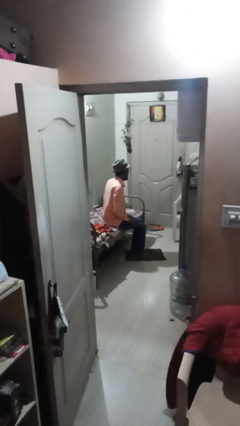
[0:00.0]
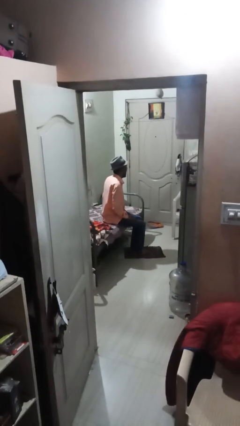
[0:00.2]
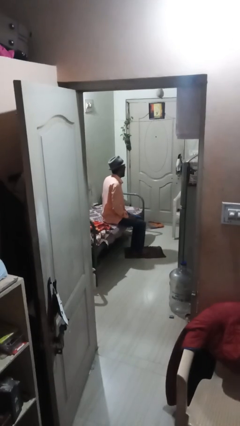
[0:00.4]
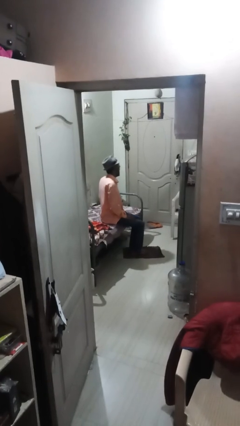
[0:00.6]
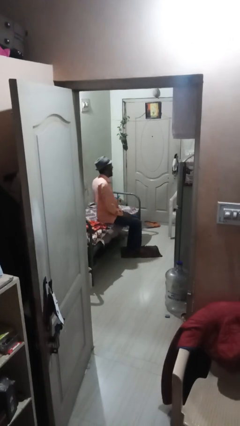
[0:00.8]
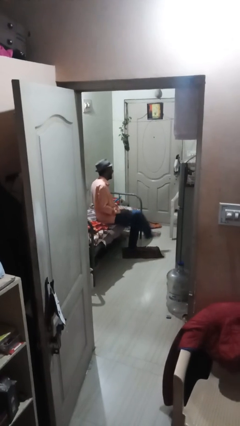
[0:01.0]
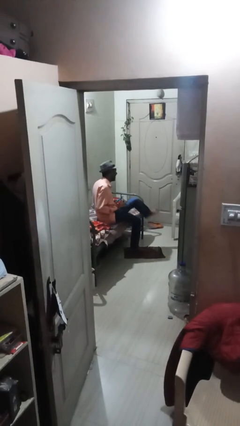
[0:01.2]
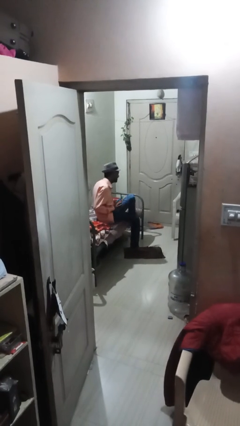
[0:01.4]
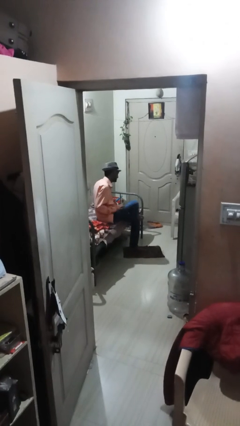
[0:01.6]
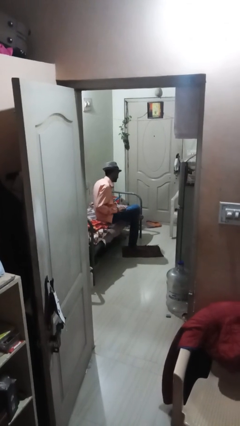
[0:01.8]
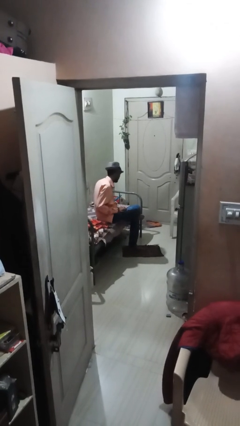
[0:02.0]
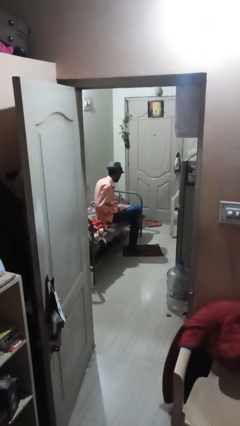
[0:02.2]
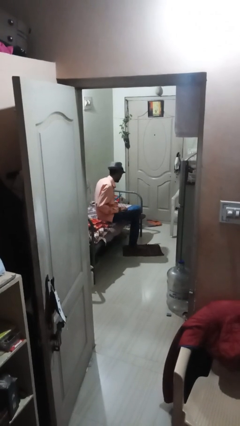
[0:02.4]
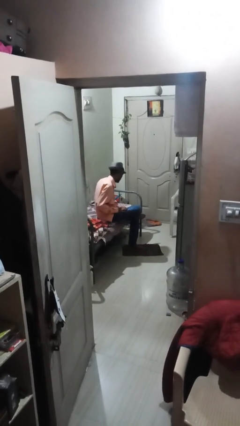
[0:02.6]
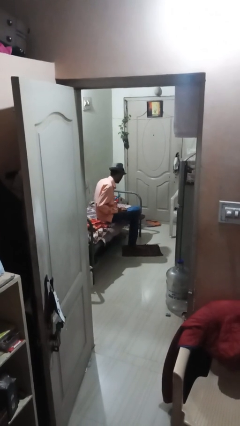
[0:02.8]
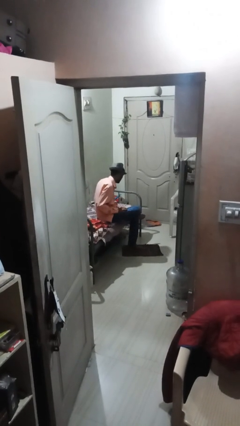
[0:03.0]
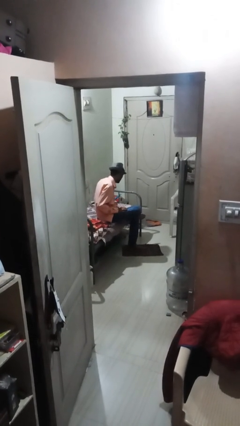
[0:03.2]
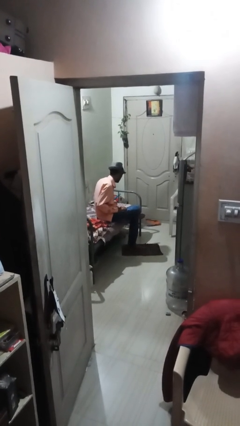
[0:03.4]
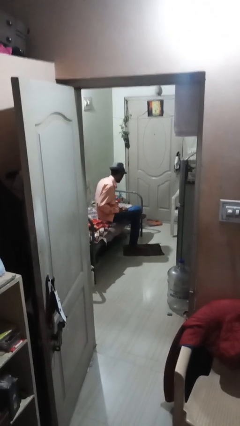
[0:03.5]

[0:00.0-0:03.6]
person crosses legs

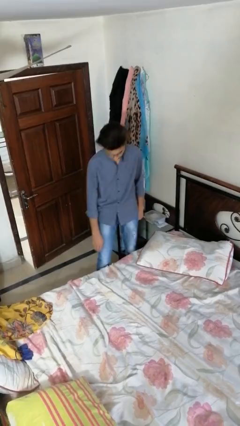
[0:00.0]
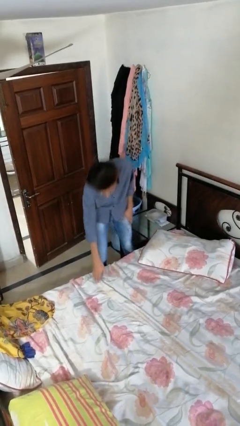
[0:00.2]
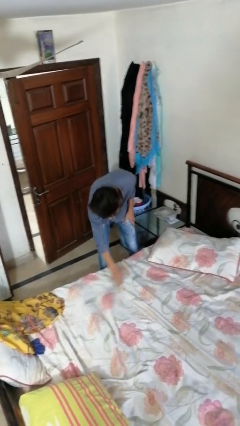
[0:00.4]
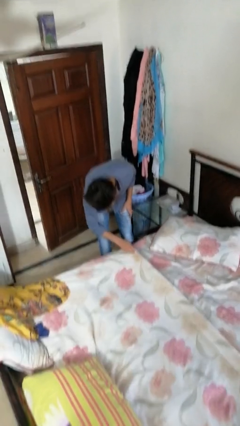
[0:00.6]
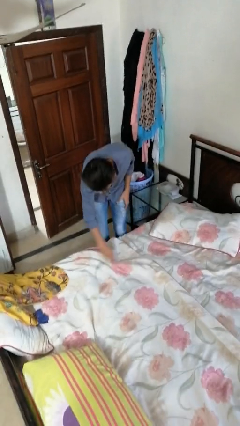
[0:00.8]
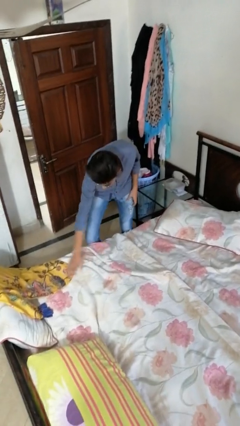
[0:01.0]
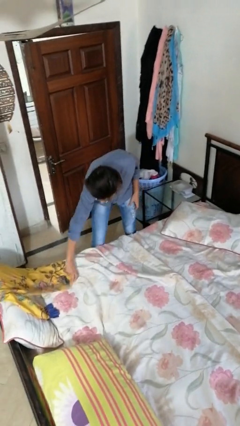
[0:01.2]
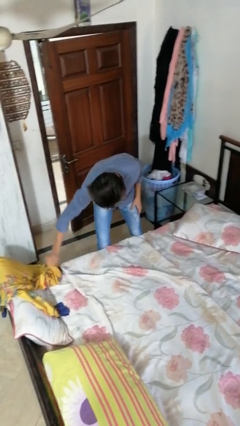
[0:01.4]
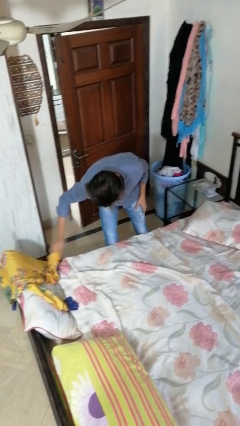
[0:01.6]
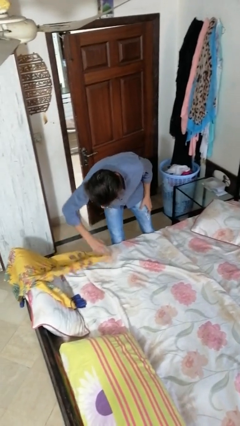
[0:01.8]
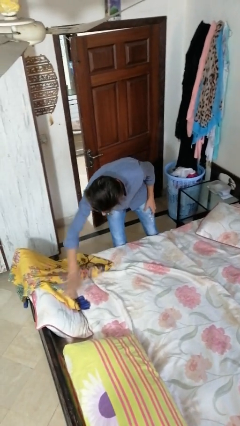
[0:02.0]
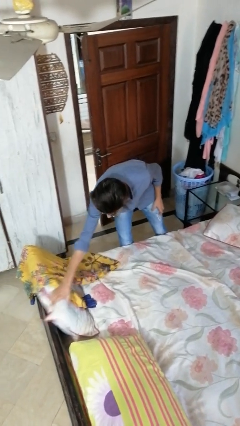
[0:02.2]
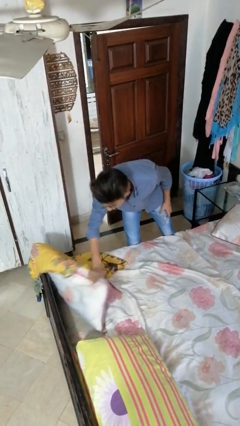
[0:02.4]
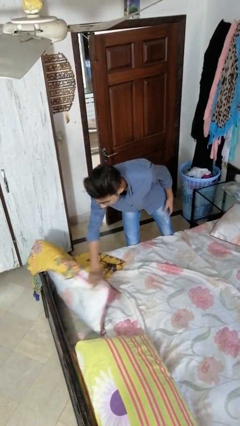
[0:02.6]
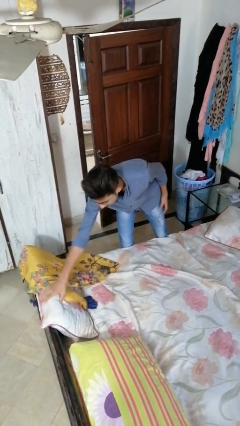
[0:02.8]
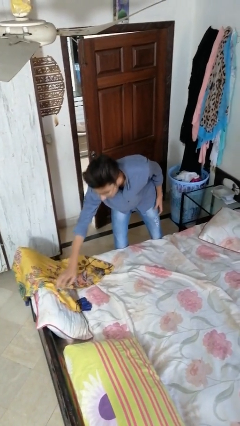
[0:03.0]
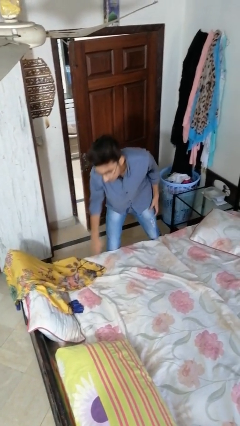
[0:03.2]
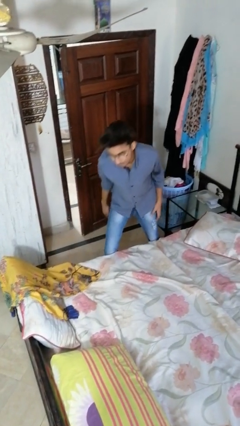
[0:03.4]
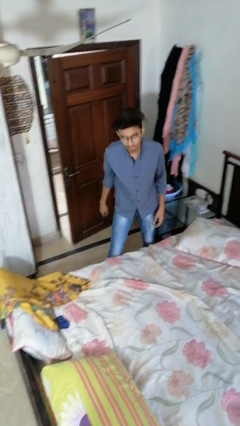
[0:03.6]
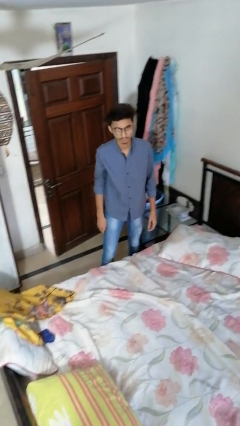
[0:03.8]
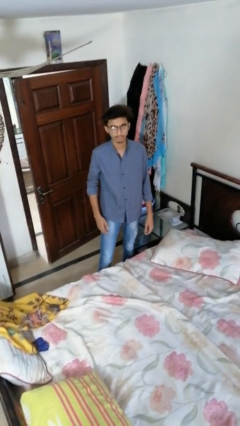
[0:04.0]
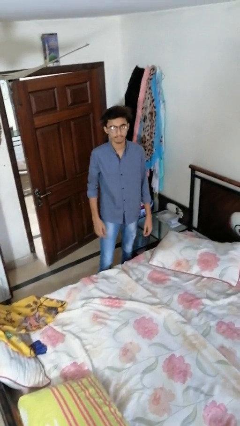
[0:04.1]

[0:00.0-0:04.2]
person searches under bed

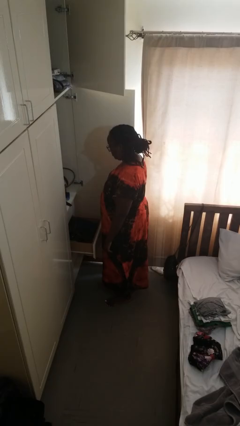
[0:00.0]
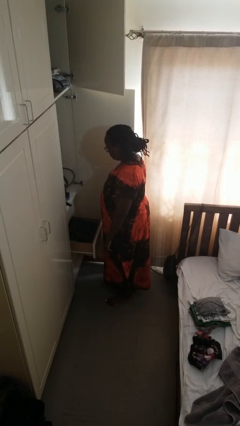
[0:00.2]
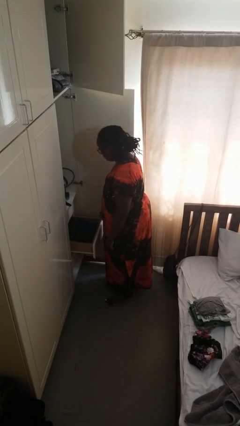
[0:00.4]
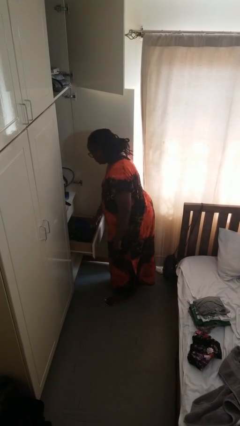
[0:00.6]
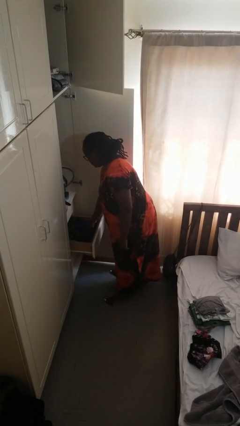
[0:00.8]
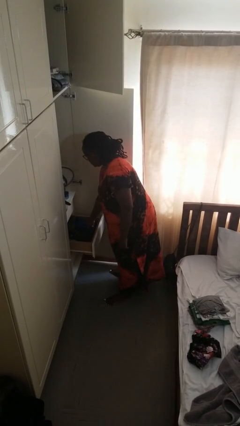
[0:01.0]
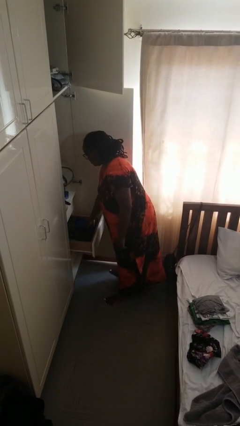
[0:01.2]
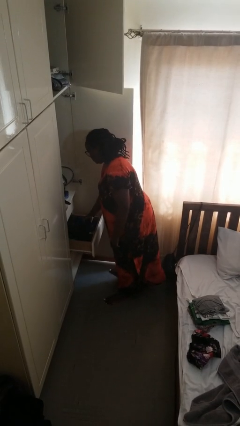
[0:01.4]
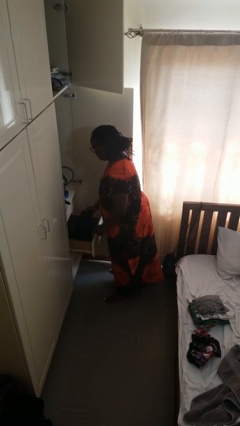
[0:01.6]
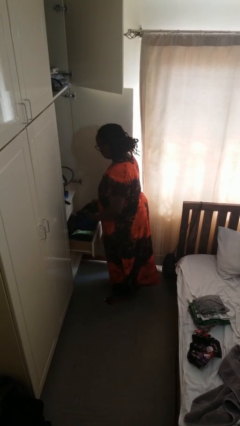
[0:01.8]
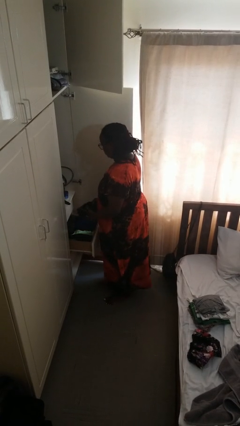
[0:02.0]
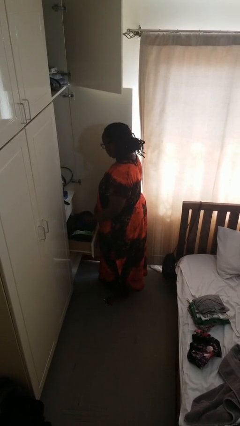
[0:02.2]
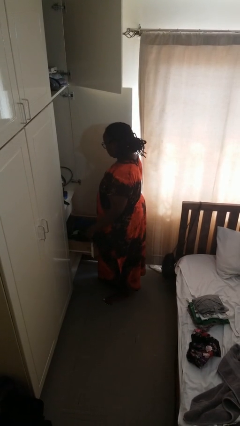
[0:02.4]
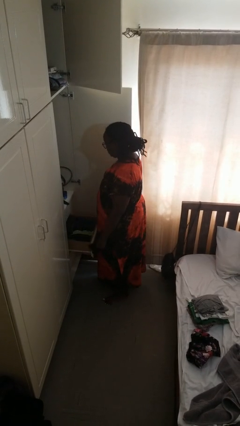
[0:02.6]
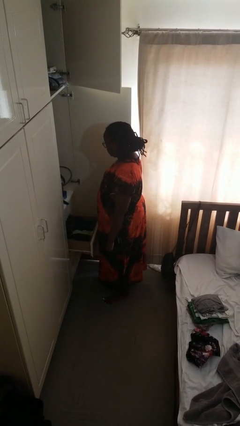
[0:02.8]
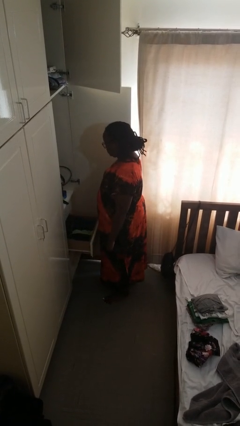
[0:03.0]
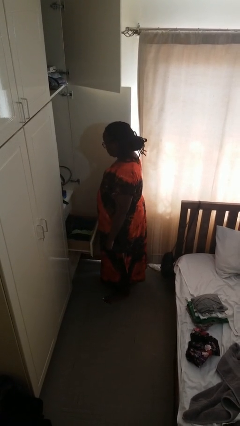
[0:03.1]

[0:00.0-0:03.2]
person takes clothes from dresser

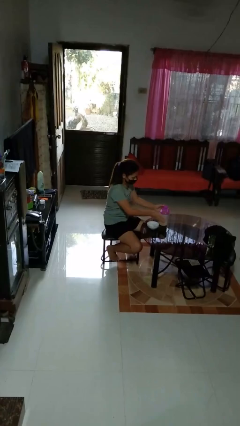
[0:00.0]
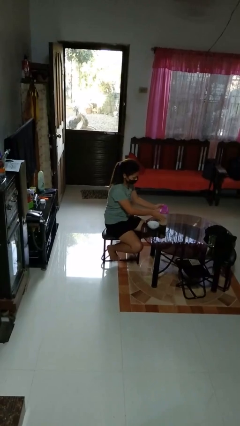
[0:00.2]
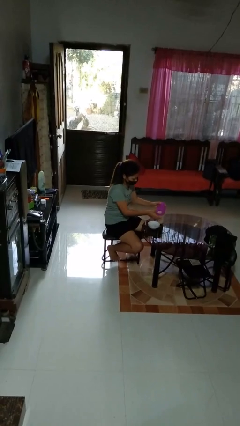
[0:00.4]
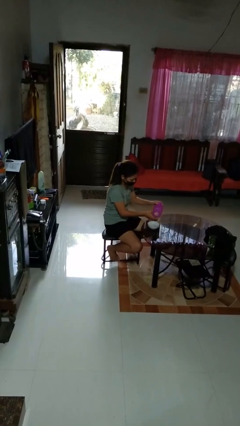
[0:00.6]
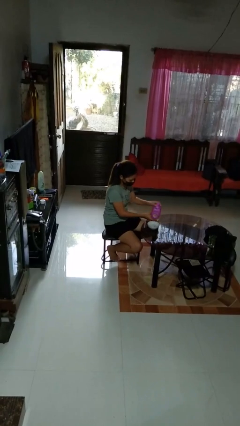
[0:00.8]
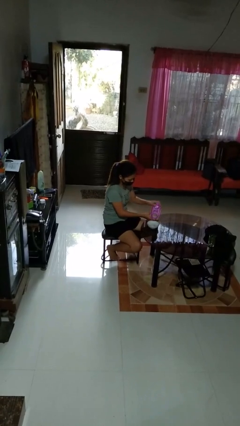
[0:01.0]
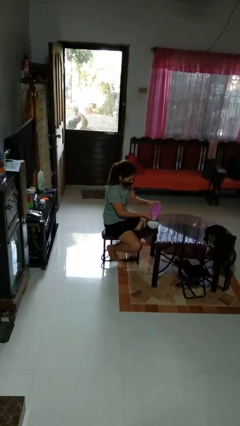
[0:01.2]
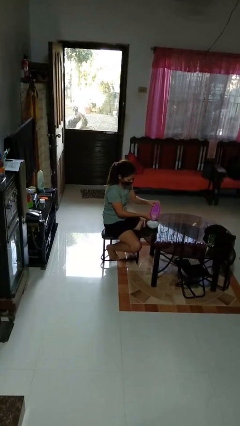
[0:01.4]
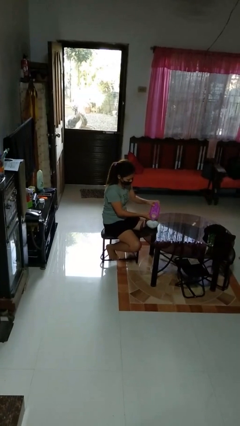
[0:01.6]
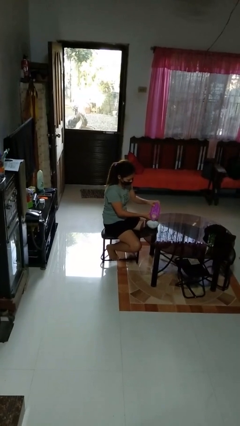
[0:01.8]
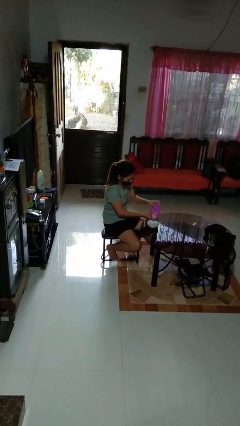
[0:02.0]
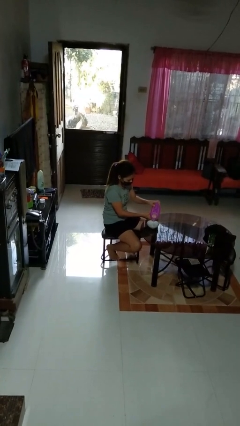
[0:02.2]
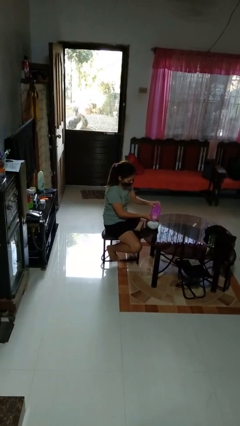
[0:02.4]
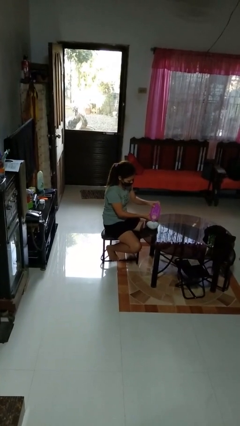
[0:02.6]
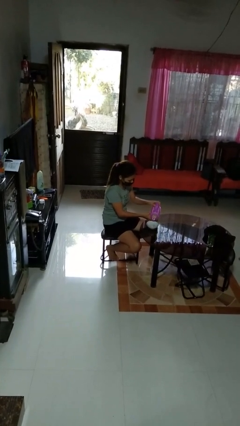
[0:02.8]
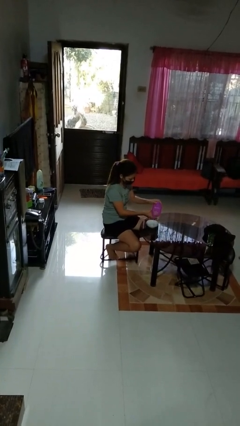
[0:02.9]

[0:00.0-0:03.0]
person pours into bowl

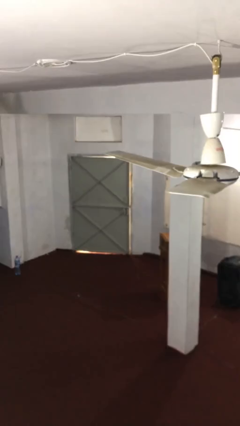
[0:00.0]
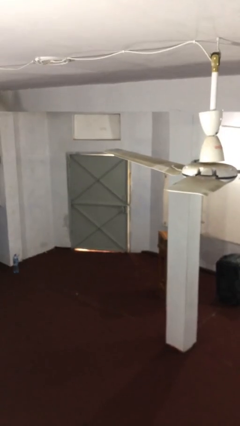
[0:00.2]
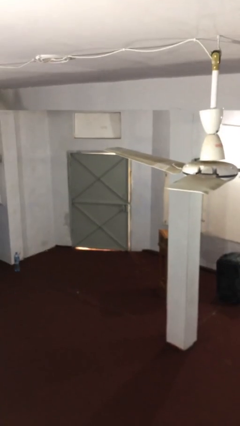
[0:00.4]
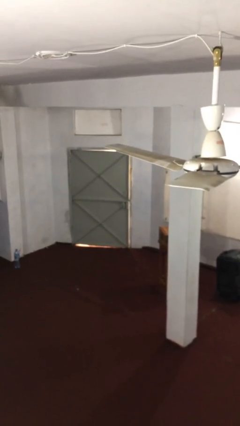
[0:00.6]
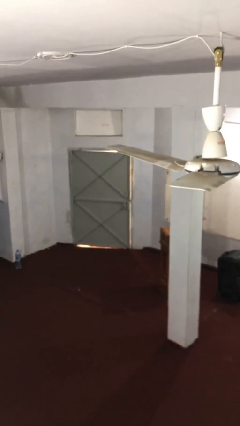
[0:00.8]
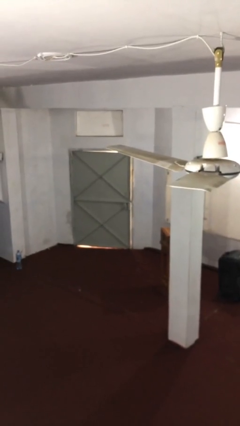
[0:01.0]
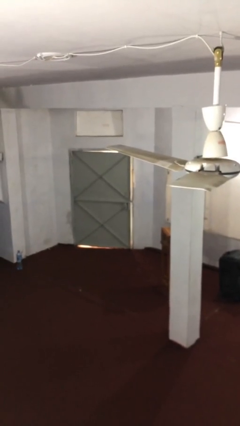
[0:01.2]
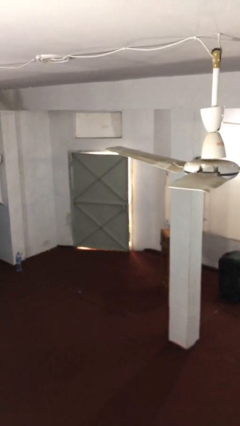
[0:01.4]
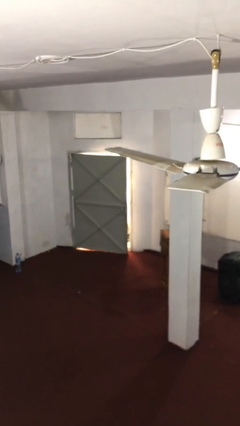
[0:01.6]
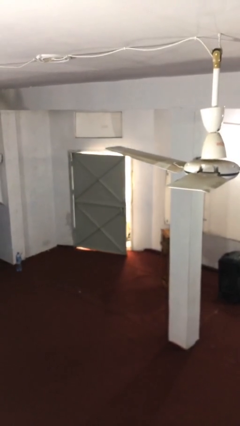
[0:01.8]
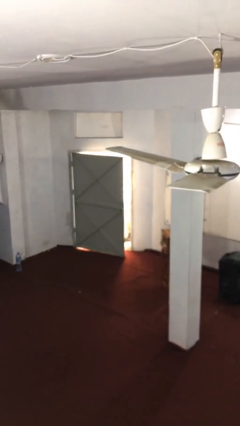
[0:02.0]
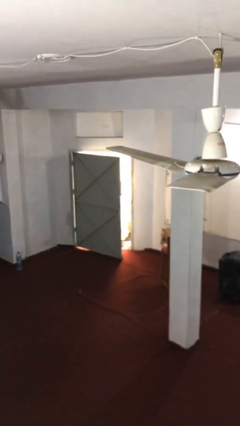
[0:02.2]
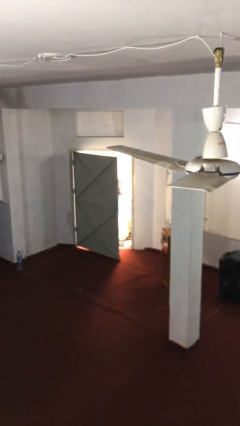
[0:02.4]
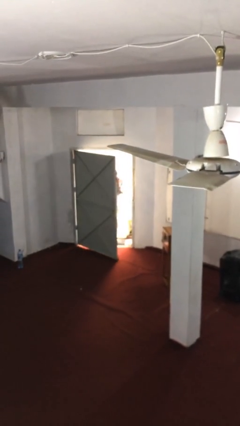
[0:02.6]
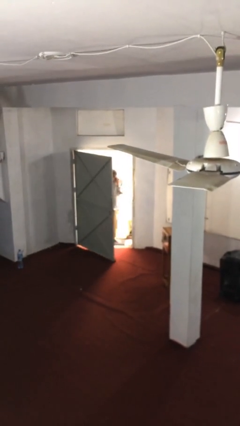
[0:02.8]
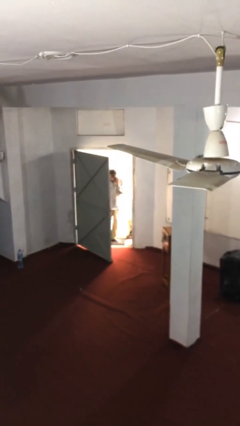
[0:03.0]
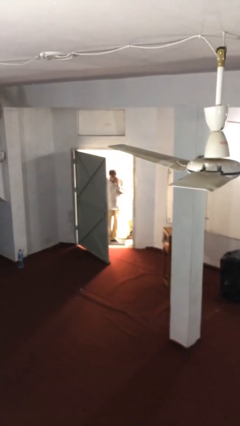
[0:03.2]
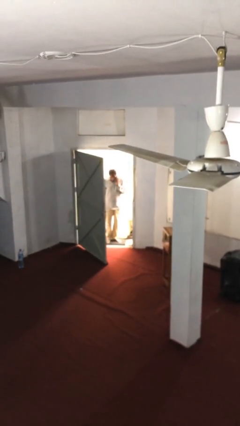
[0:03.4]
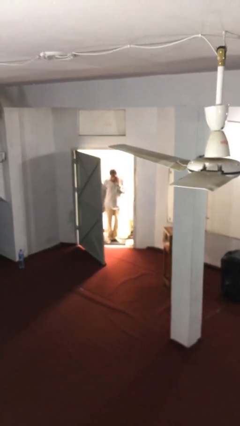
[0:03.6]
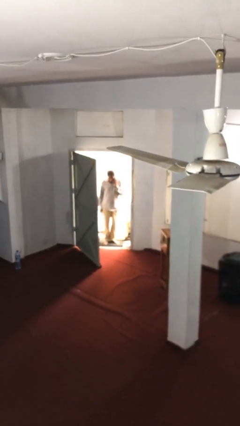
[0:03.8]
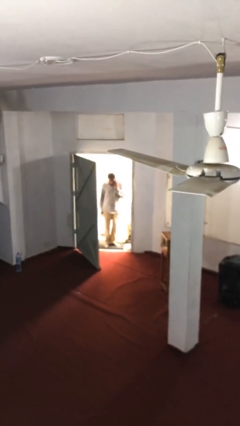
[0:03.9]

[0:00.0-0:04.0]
person opens facility door
